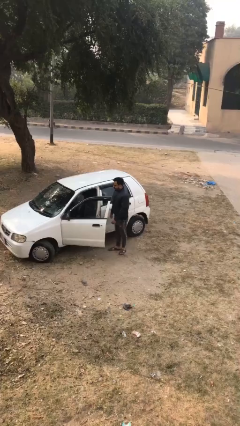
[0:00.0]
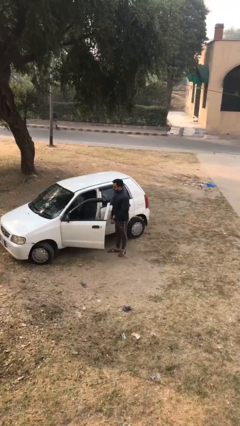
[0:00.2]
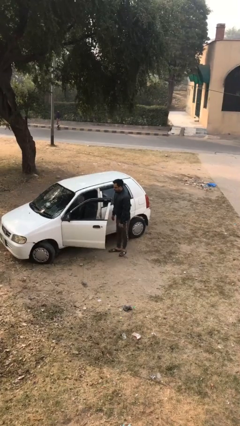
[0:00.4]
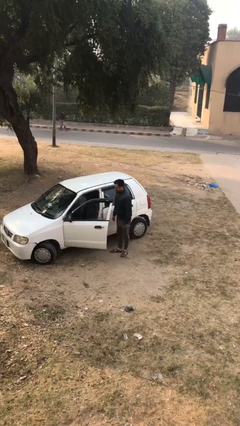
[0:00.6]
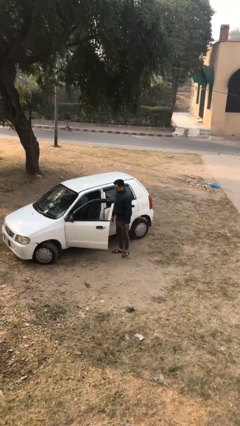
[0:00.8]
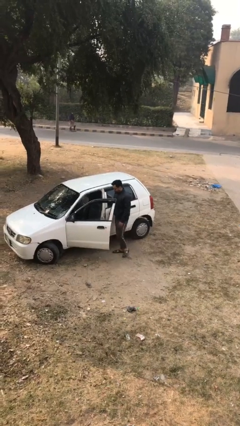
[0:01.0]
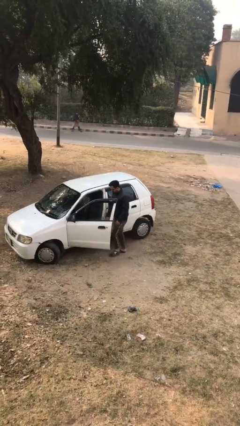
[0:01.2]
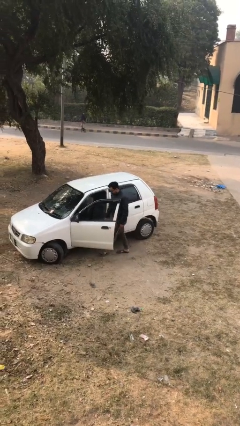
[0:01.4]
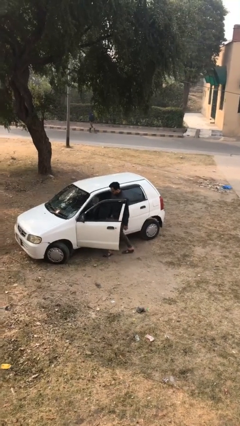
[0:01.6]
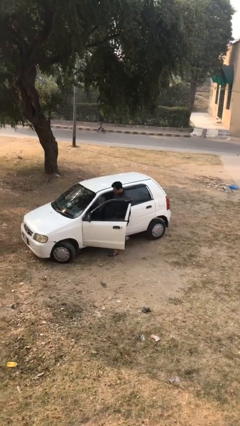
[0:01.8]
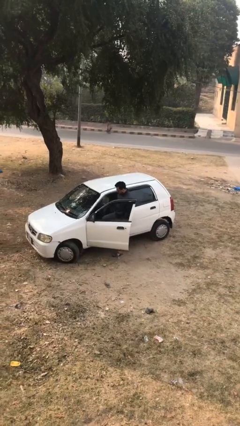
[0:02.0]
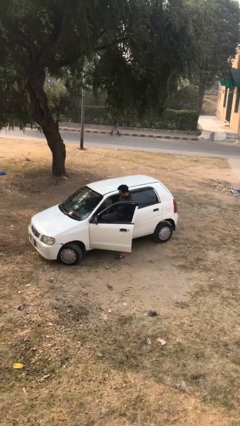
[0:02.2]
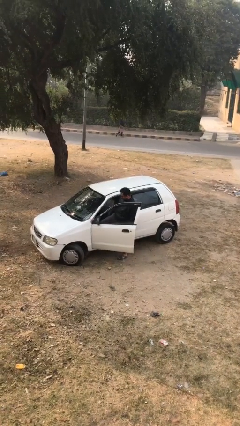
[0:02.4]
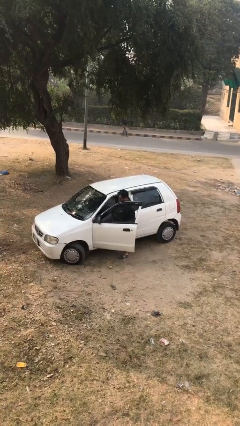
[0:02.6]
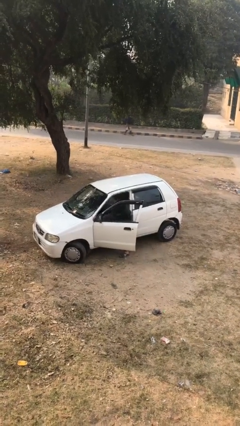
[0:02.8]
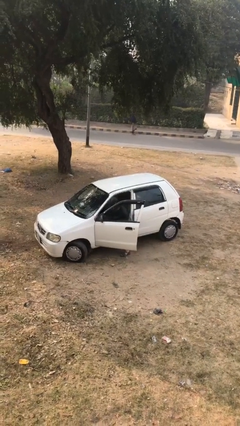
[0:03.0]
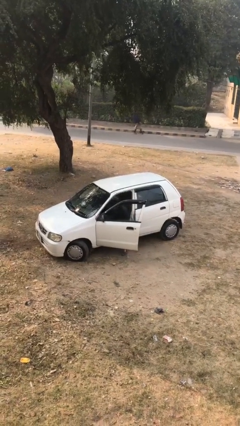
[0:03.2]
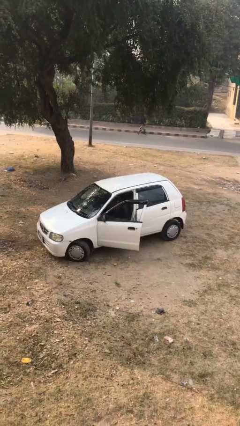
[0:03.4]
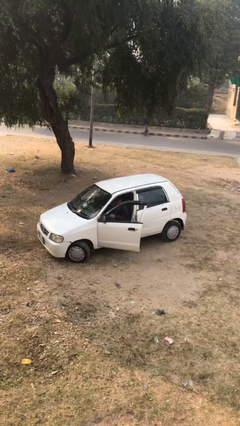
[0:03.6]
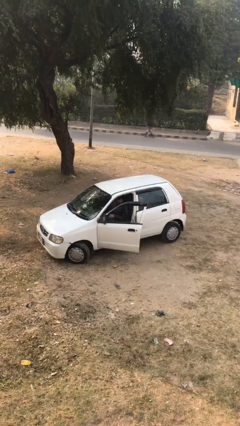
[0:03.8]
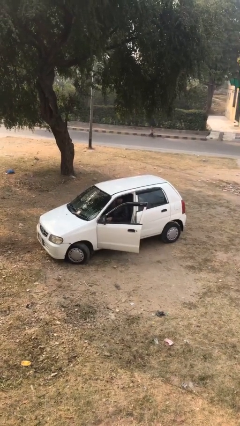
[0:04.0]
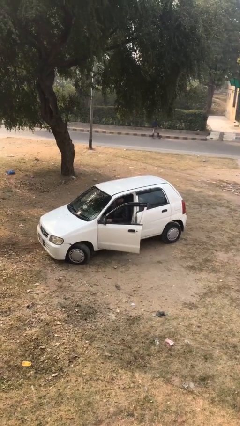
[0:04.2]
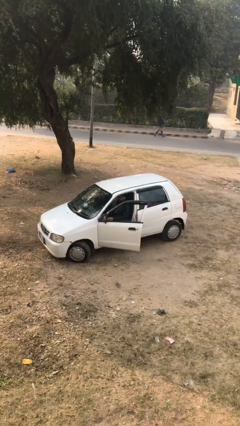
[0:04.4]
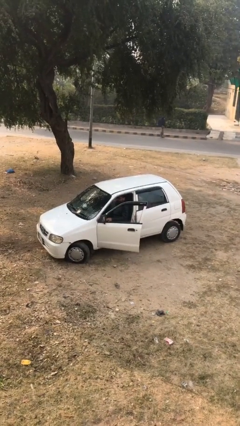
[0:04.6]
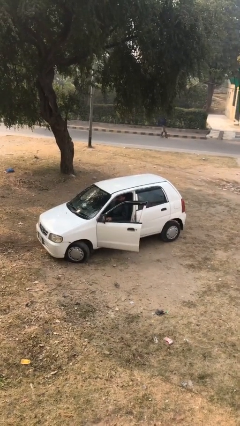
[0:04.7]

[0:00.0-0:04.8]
person enters car

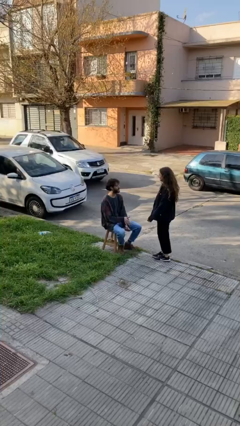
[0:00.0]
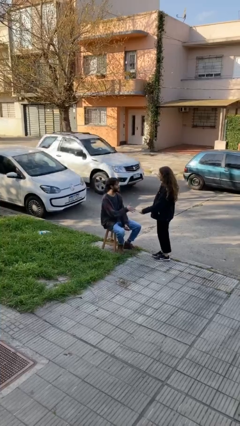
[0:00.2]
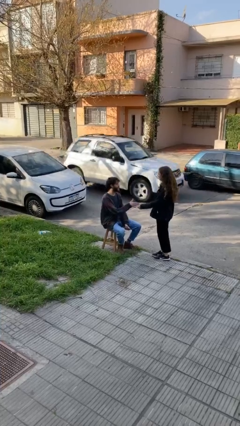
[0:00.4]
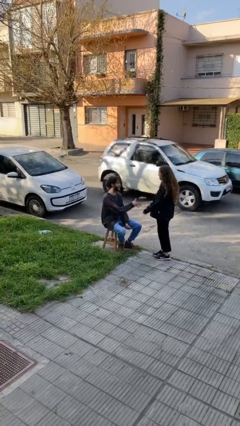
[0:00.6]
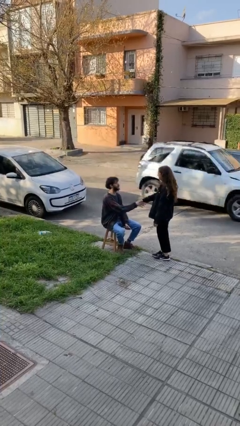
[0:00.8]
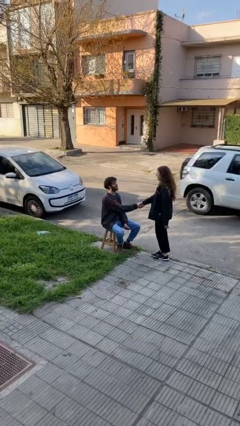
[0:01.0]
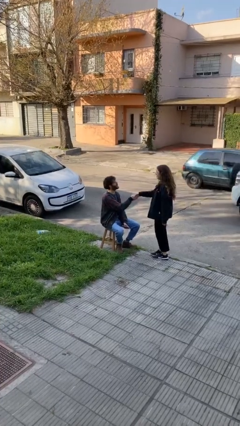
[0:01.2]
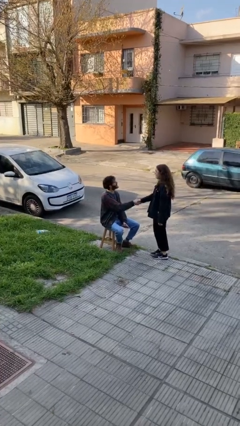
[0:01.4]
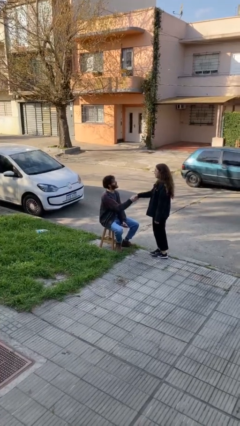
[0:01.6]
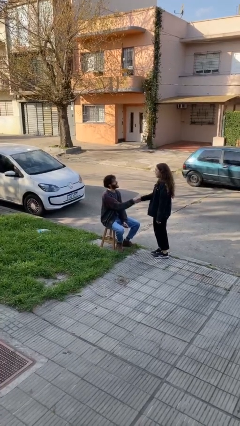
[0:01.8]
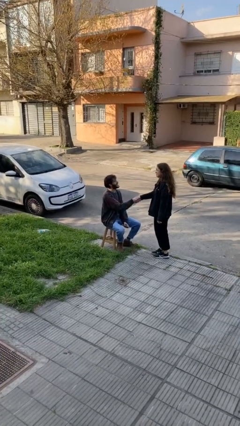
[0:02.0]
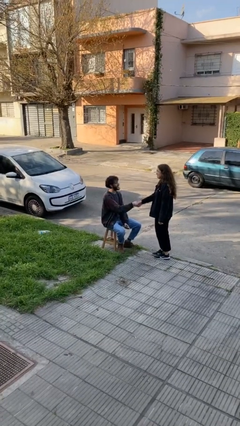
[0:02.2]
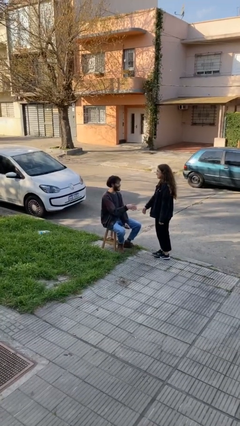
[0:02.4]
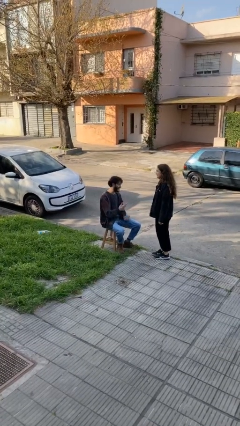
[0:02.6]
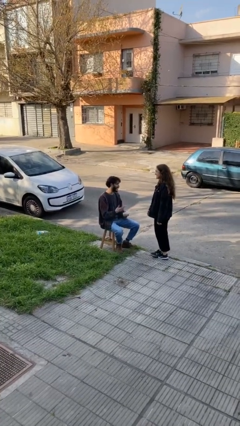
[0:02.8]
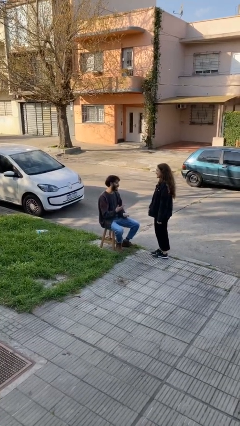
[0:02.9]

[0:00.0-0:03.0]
person shakes hand

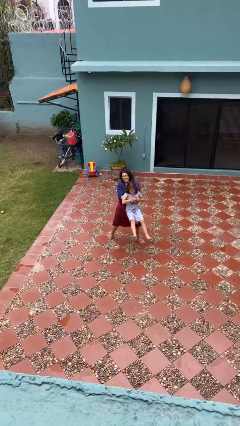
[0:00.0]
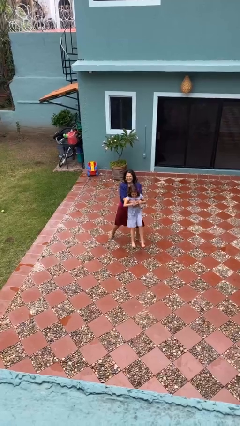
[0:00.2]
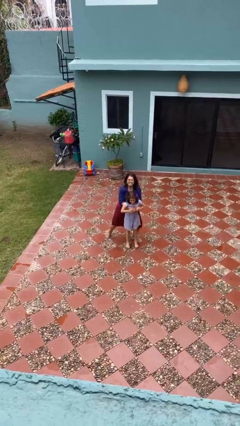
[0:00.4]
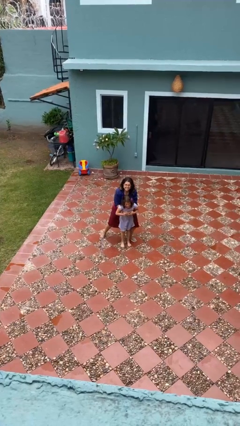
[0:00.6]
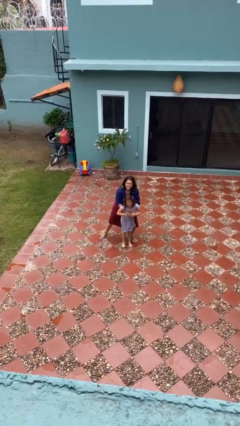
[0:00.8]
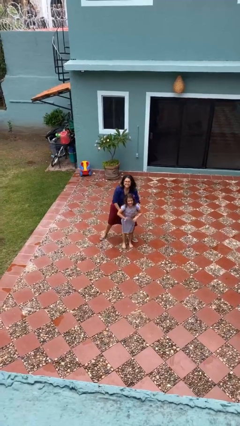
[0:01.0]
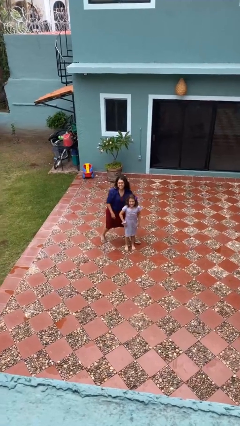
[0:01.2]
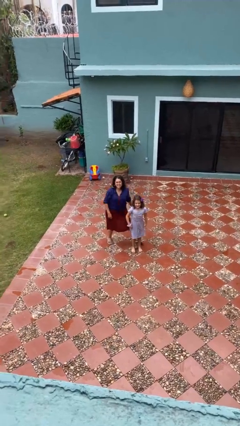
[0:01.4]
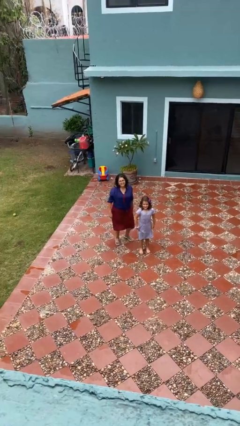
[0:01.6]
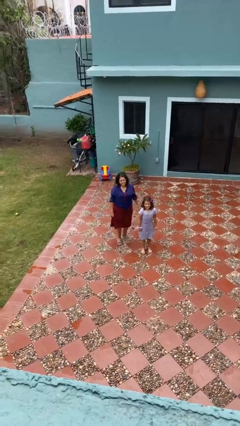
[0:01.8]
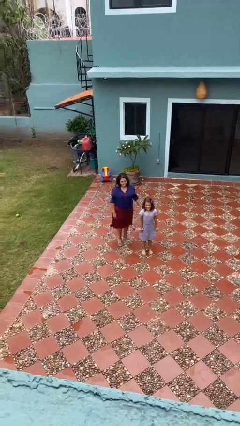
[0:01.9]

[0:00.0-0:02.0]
person puts down person

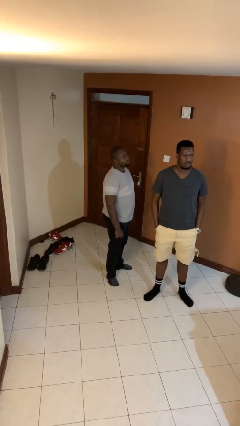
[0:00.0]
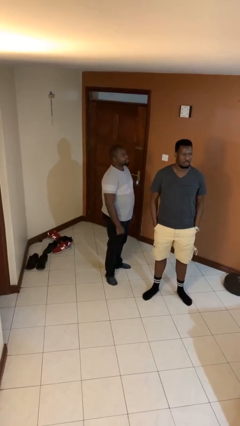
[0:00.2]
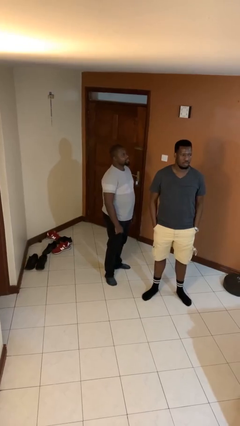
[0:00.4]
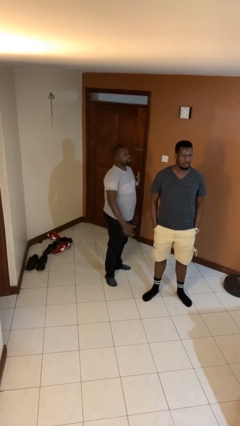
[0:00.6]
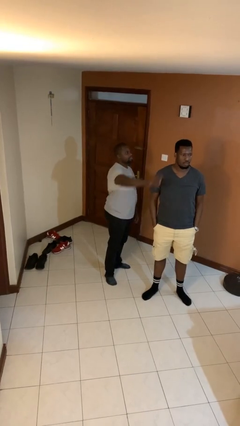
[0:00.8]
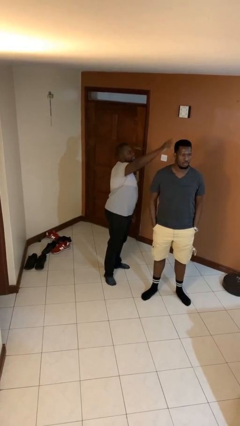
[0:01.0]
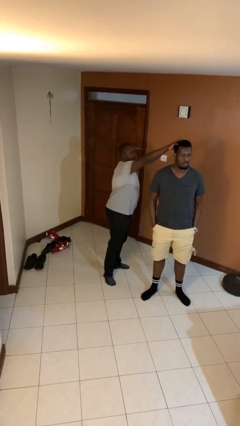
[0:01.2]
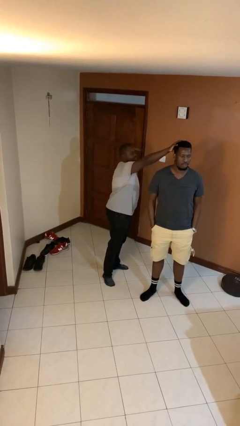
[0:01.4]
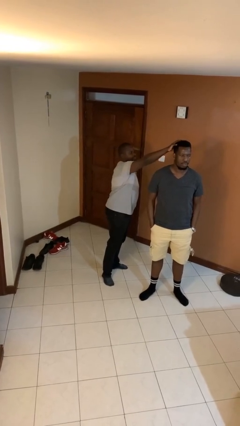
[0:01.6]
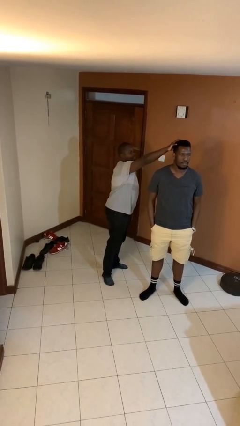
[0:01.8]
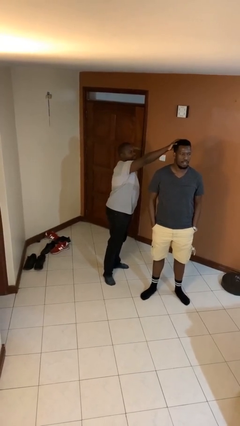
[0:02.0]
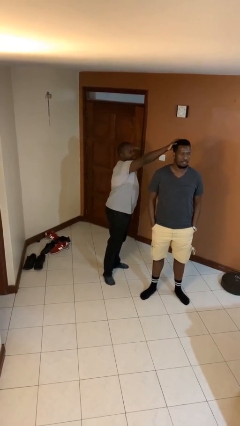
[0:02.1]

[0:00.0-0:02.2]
person grabs person by hair

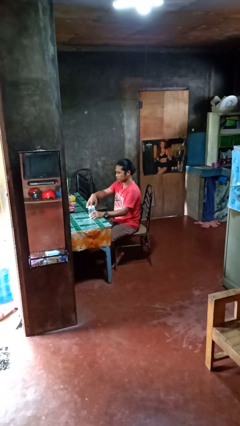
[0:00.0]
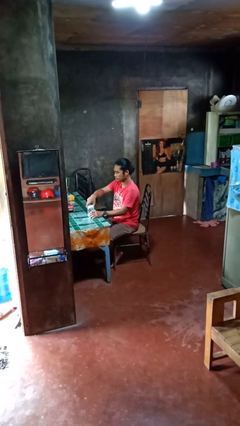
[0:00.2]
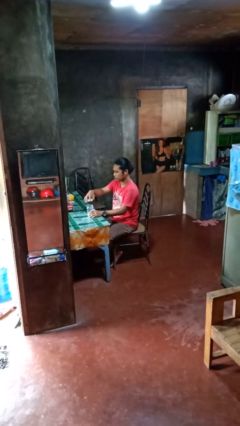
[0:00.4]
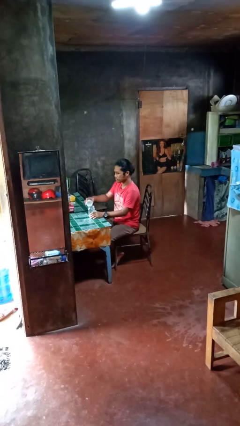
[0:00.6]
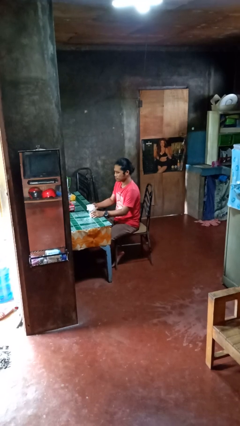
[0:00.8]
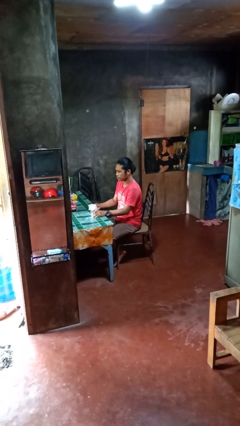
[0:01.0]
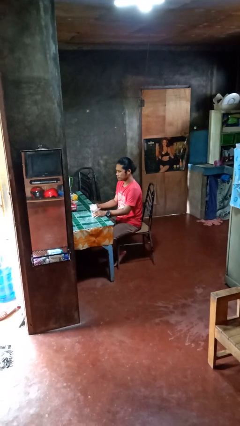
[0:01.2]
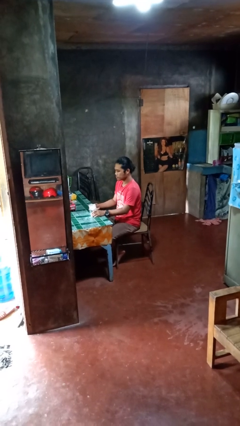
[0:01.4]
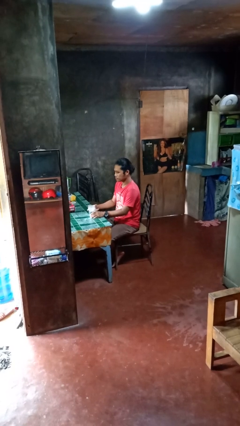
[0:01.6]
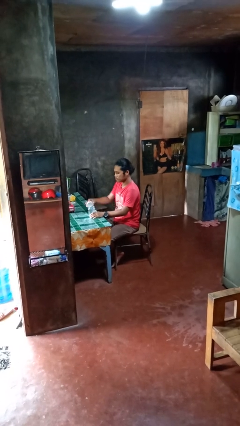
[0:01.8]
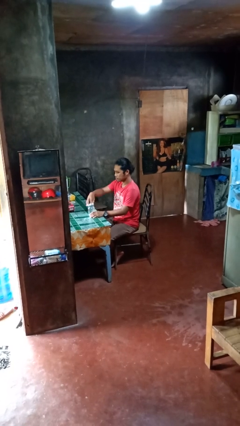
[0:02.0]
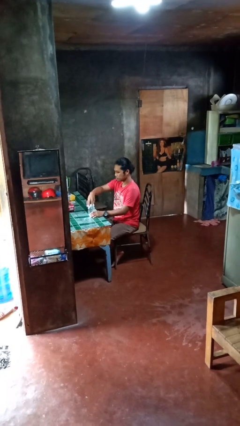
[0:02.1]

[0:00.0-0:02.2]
person opens jar

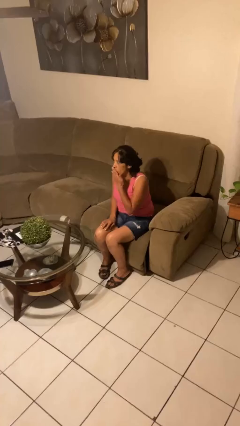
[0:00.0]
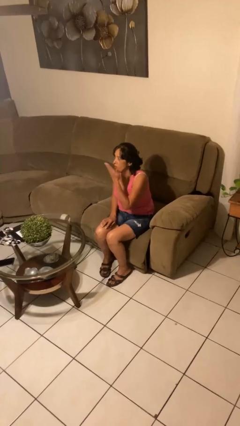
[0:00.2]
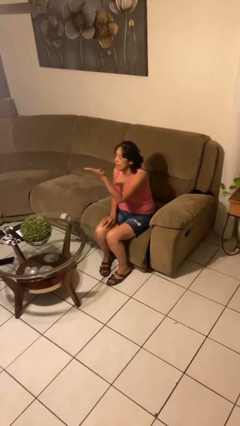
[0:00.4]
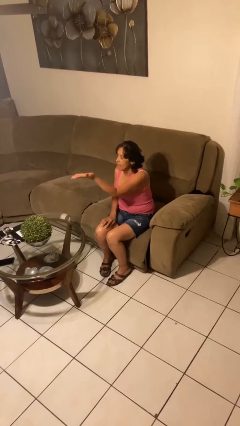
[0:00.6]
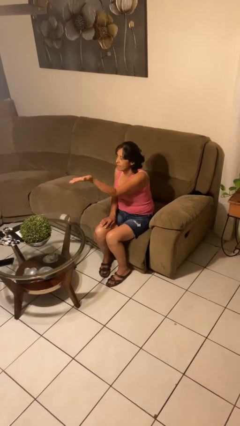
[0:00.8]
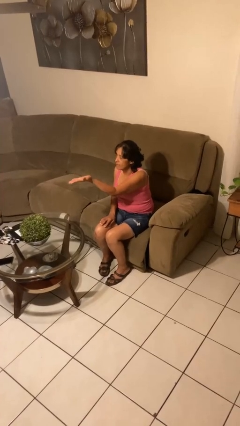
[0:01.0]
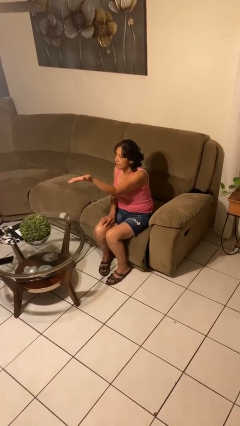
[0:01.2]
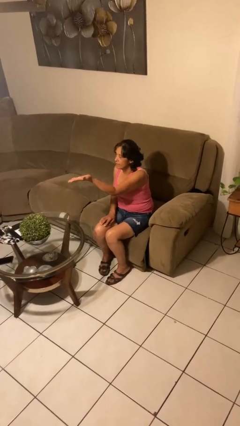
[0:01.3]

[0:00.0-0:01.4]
person gestures blow kiss

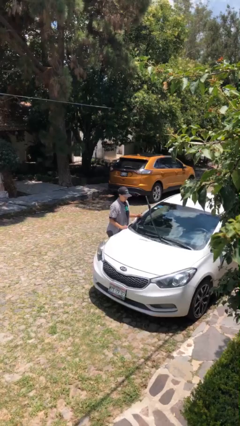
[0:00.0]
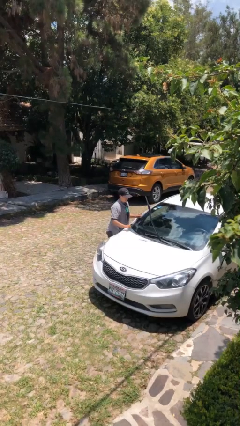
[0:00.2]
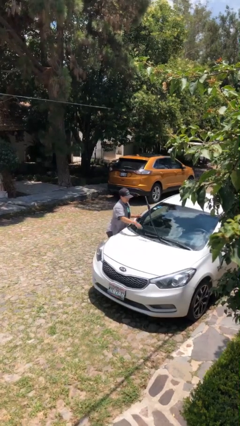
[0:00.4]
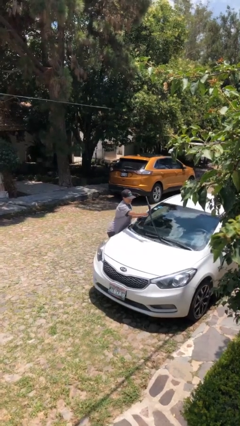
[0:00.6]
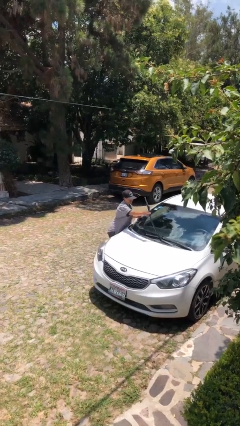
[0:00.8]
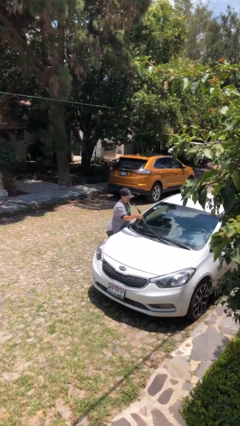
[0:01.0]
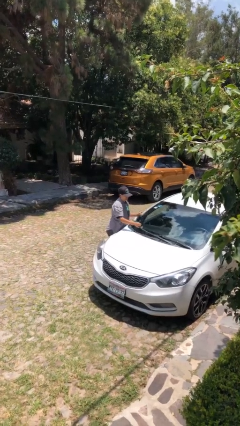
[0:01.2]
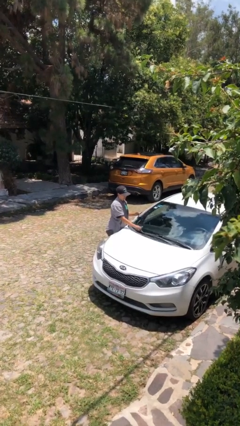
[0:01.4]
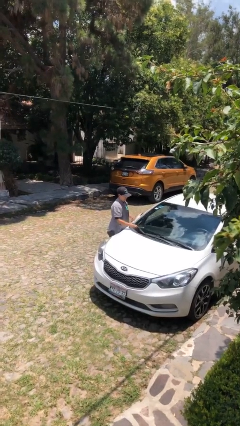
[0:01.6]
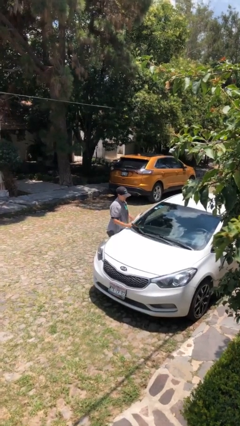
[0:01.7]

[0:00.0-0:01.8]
person flips down car wipers
